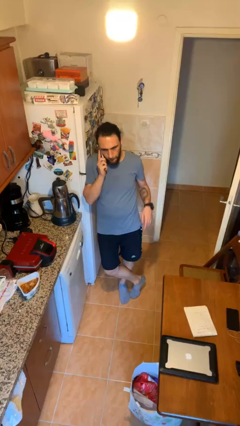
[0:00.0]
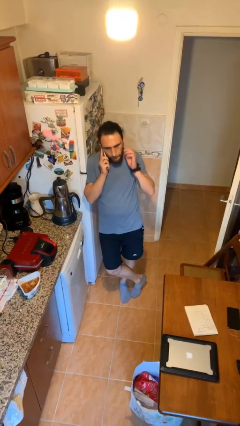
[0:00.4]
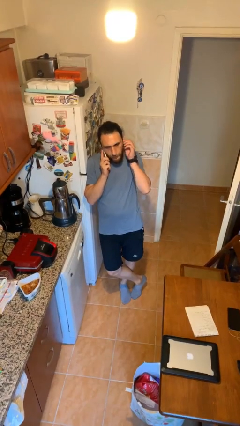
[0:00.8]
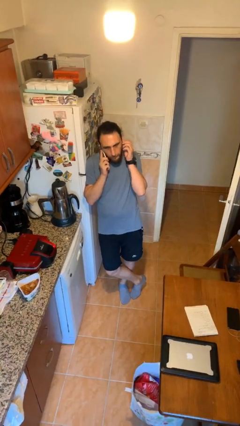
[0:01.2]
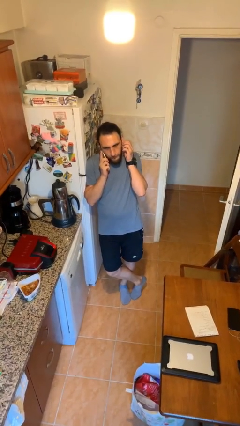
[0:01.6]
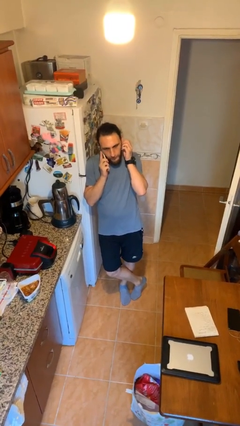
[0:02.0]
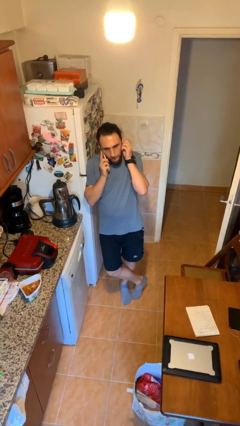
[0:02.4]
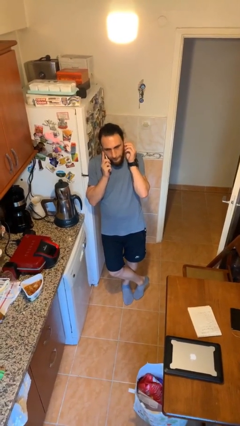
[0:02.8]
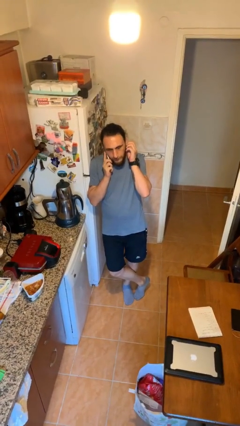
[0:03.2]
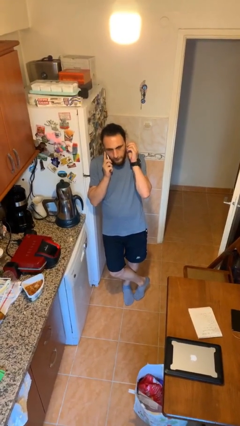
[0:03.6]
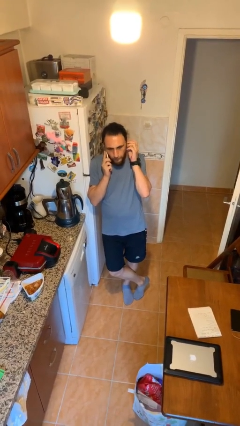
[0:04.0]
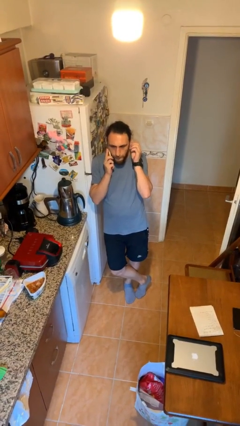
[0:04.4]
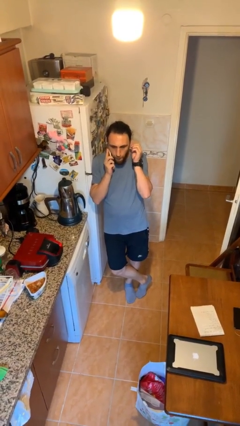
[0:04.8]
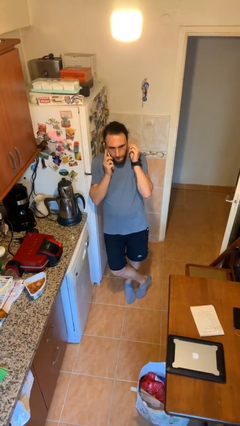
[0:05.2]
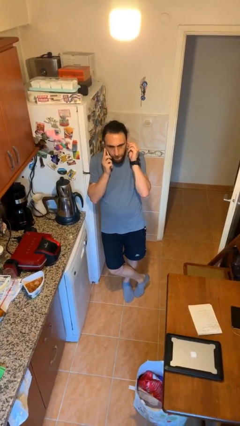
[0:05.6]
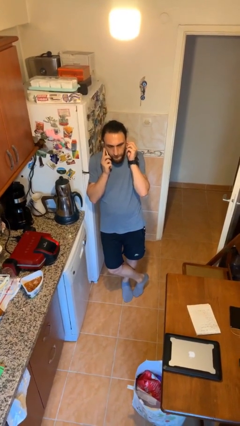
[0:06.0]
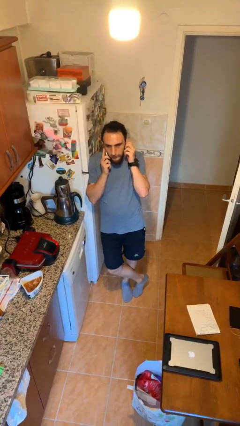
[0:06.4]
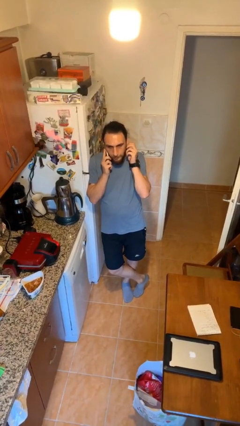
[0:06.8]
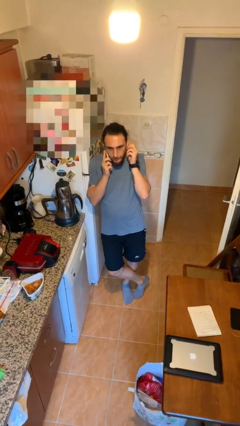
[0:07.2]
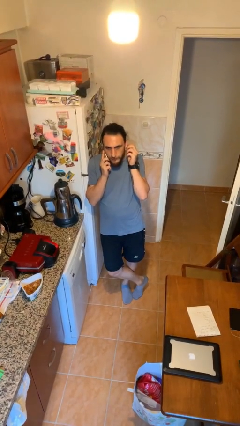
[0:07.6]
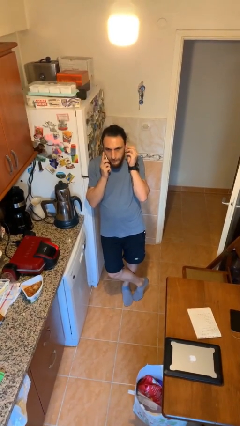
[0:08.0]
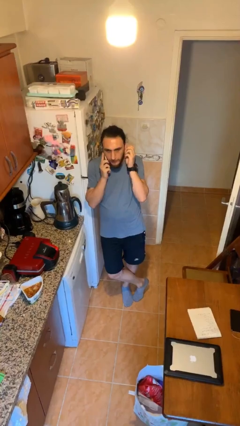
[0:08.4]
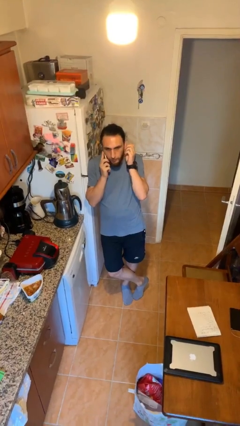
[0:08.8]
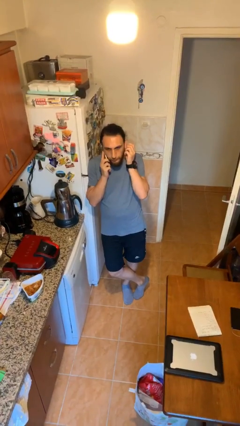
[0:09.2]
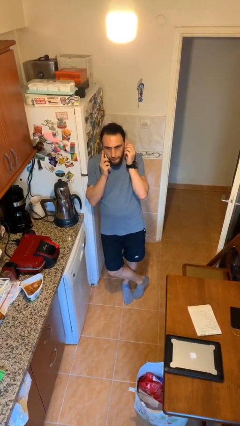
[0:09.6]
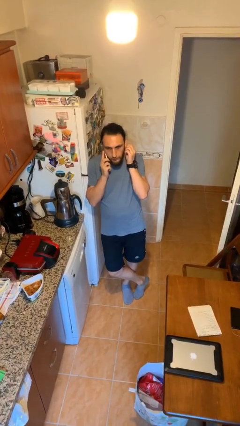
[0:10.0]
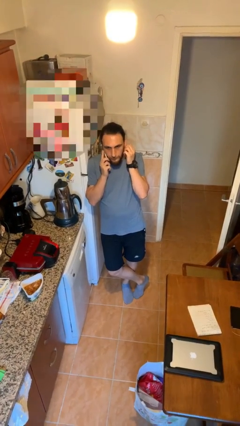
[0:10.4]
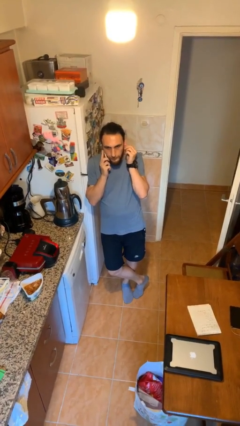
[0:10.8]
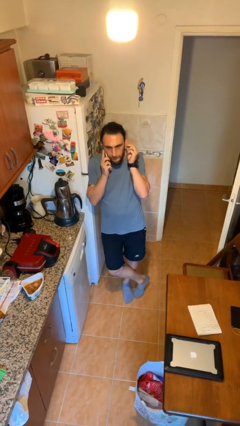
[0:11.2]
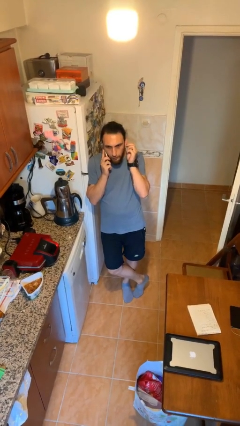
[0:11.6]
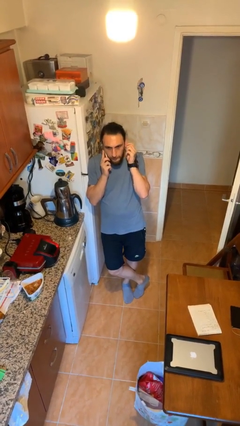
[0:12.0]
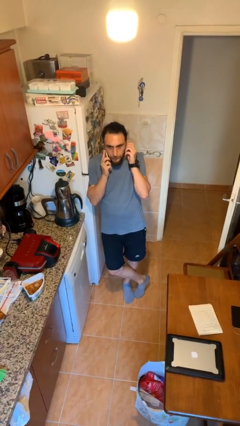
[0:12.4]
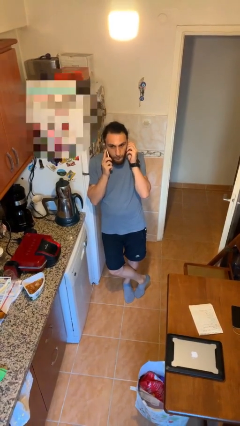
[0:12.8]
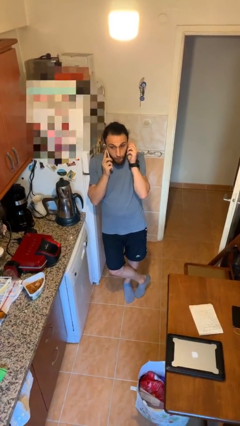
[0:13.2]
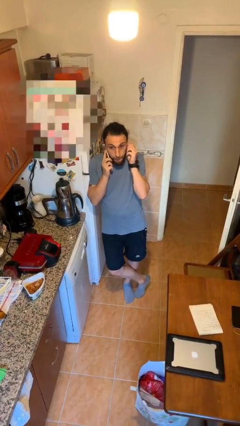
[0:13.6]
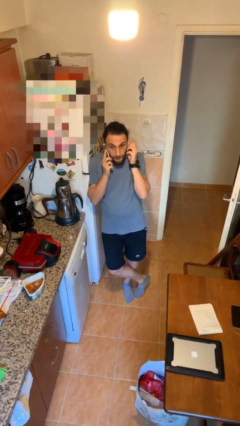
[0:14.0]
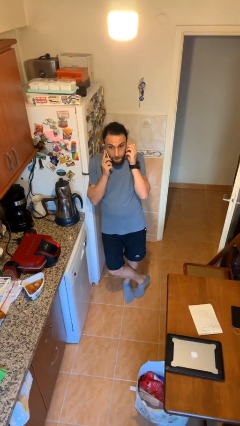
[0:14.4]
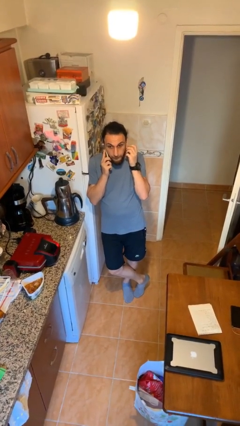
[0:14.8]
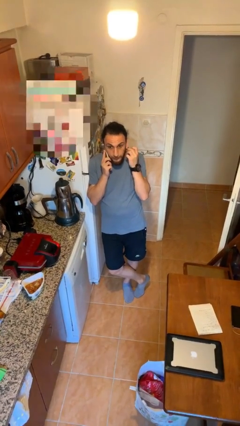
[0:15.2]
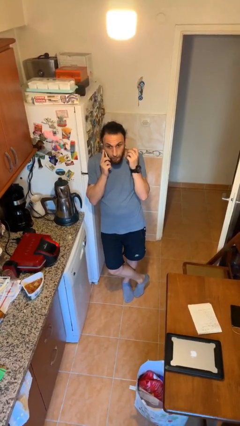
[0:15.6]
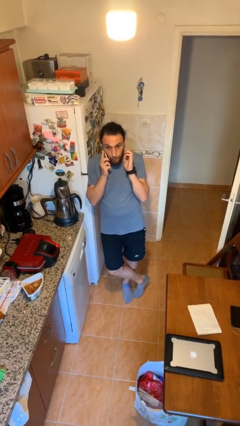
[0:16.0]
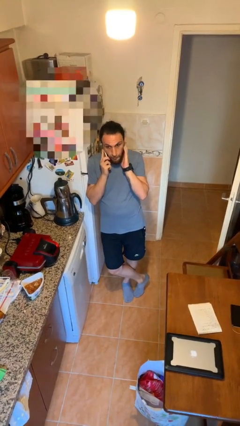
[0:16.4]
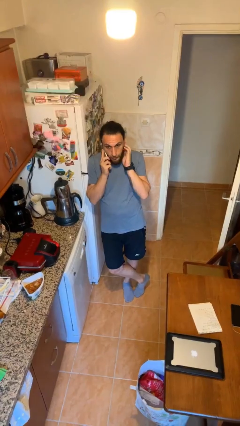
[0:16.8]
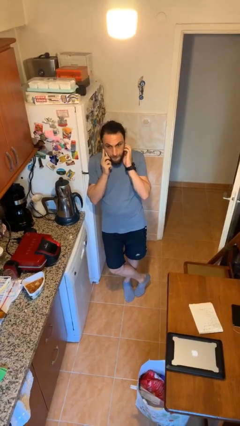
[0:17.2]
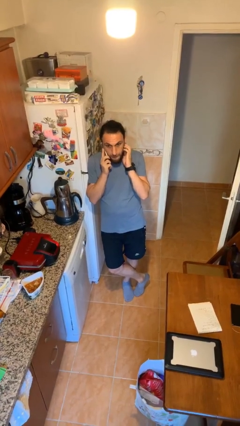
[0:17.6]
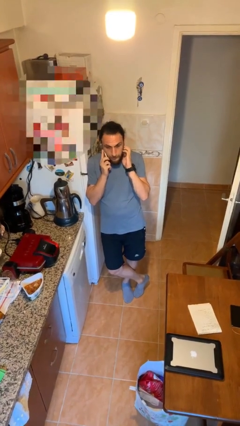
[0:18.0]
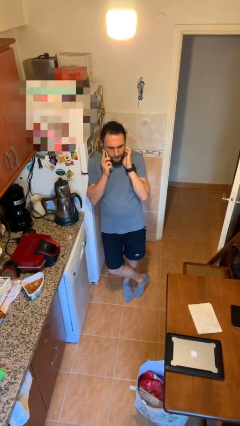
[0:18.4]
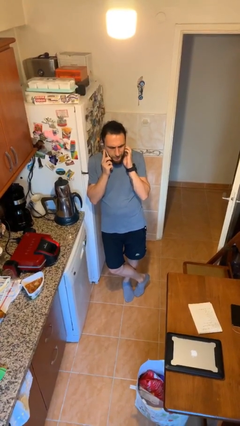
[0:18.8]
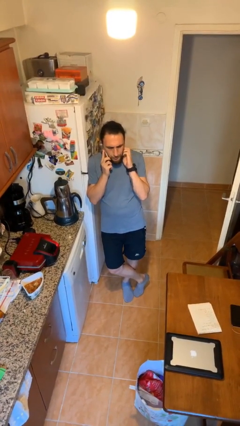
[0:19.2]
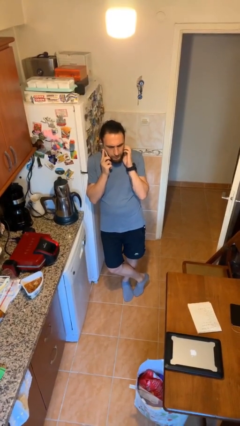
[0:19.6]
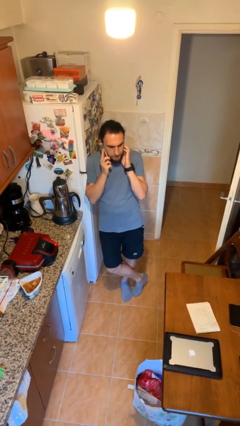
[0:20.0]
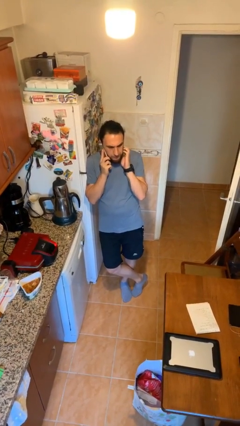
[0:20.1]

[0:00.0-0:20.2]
person talks on phone

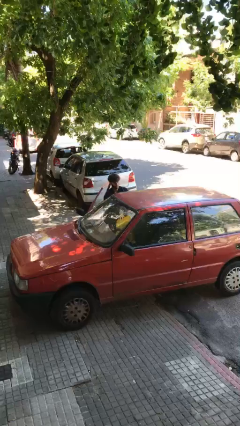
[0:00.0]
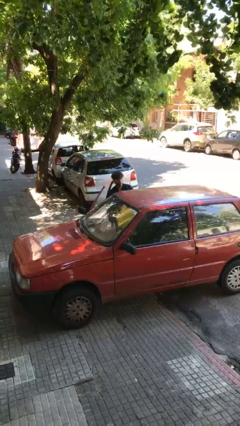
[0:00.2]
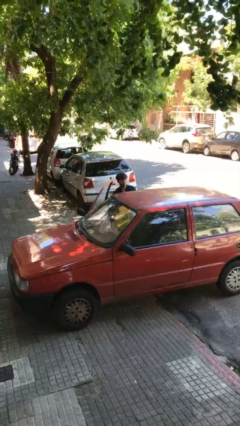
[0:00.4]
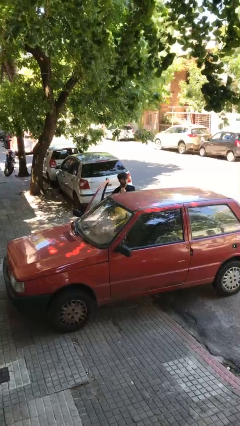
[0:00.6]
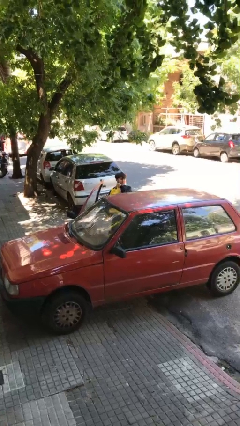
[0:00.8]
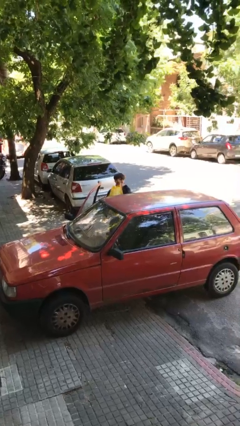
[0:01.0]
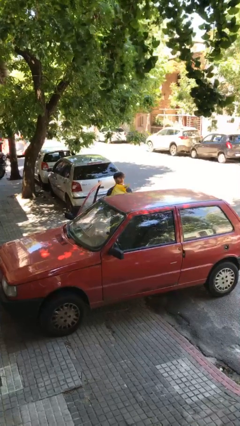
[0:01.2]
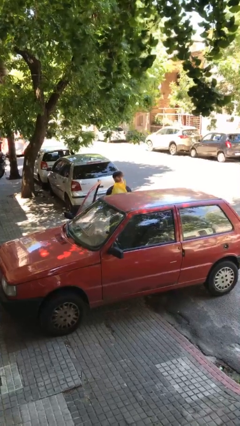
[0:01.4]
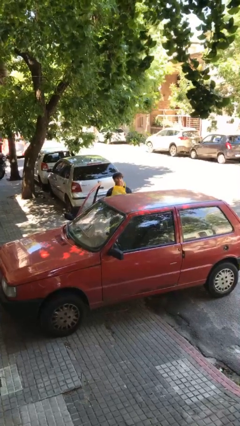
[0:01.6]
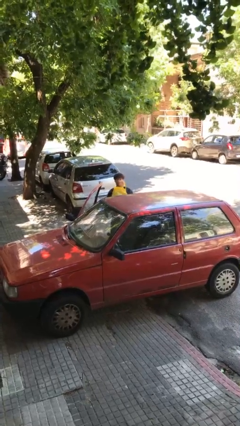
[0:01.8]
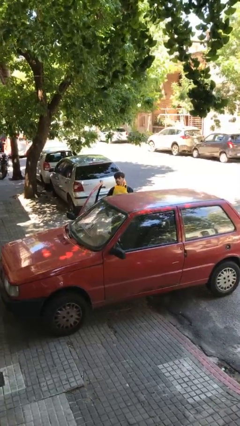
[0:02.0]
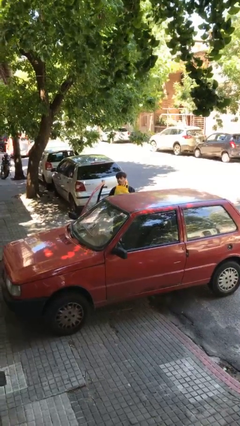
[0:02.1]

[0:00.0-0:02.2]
person unloads car

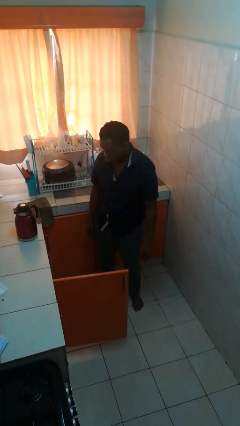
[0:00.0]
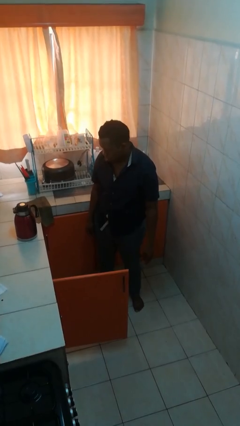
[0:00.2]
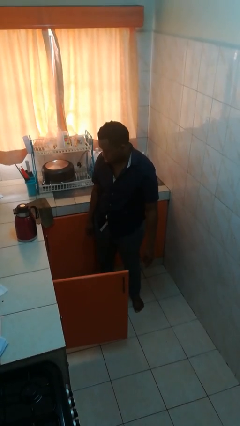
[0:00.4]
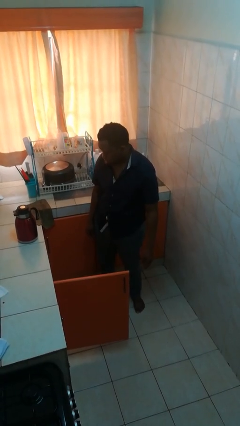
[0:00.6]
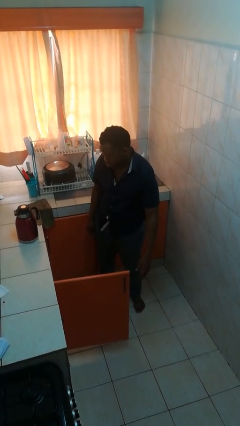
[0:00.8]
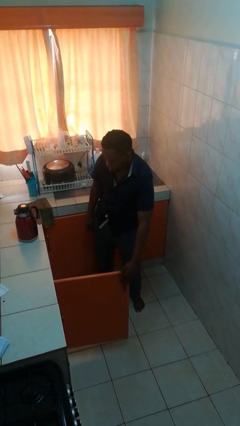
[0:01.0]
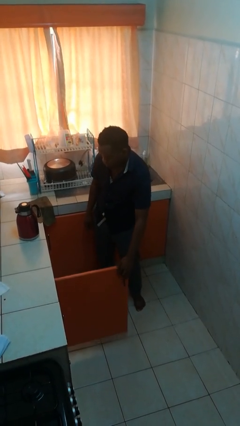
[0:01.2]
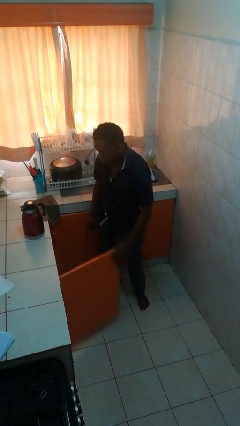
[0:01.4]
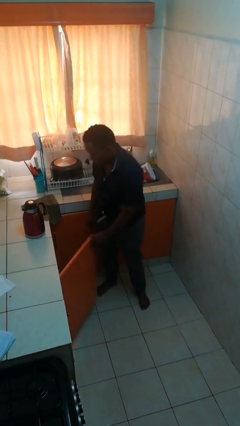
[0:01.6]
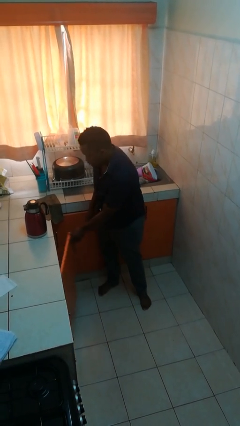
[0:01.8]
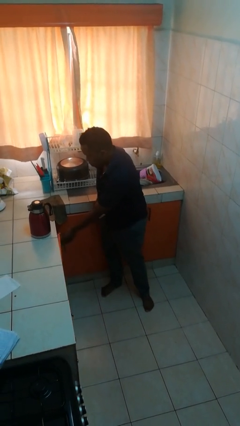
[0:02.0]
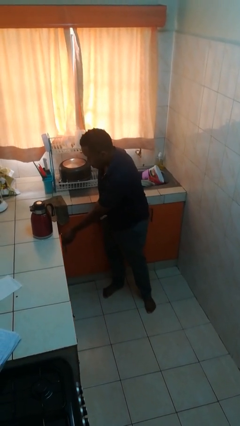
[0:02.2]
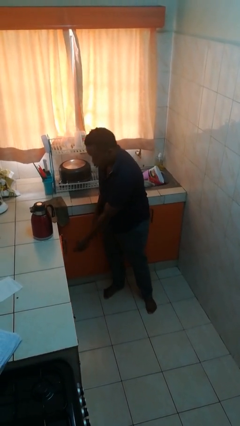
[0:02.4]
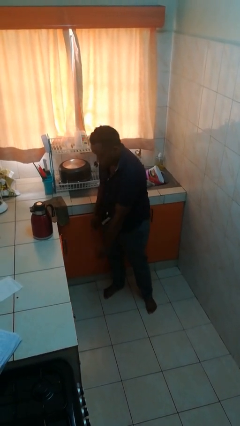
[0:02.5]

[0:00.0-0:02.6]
person closes cabinet

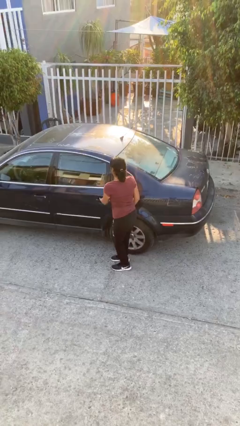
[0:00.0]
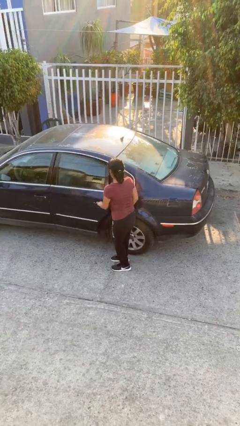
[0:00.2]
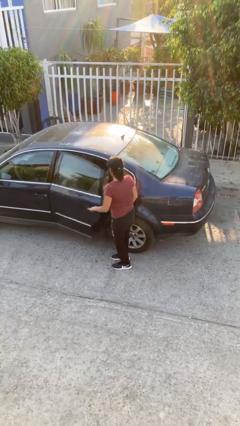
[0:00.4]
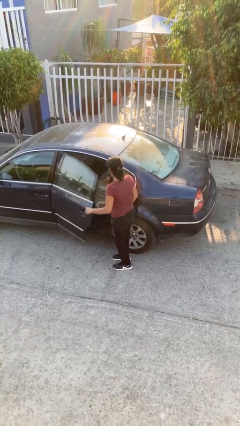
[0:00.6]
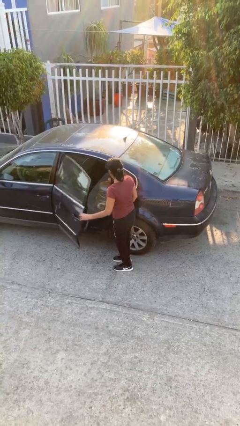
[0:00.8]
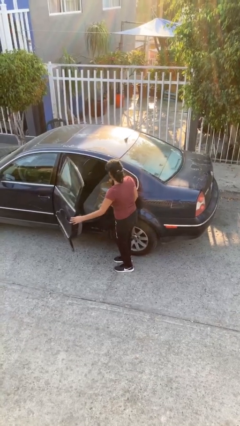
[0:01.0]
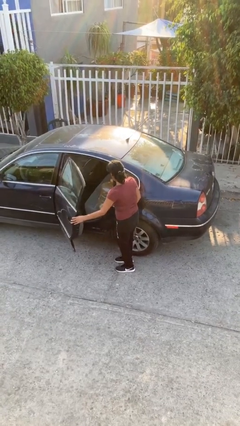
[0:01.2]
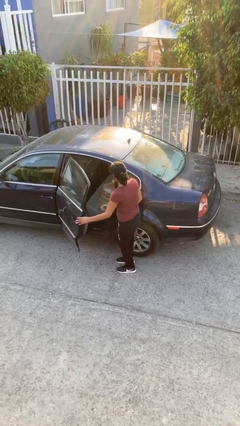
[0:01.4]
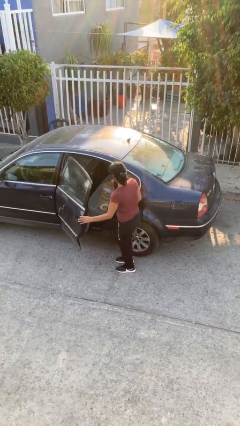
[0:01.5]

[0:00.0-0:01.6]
person opens car door

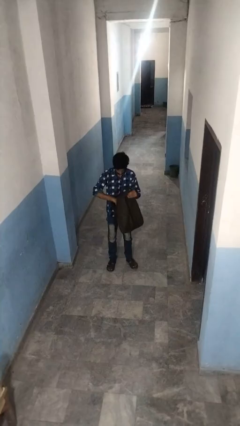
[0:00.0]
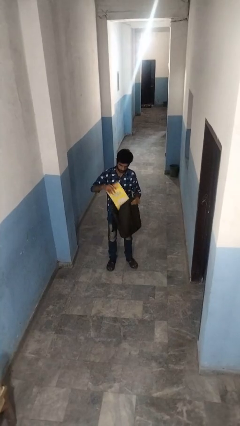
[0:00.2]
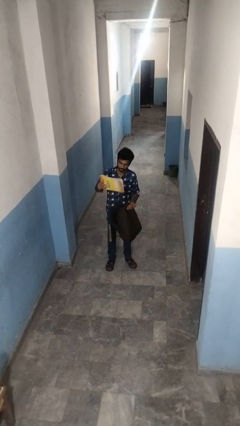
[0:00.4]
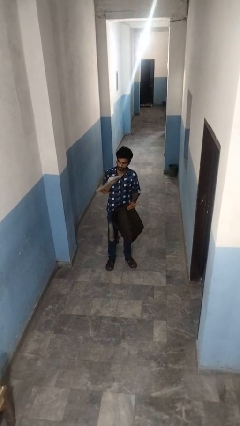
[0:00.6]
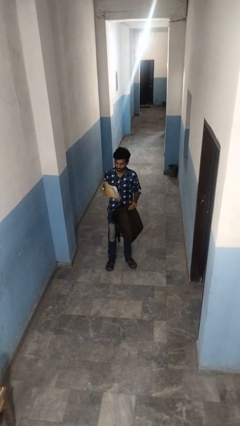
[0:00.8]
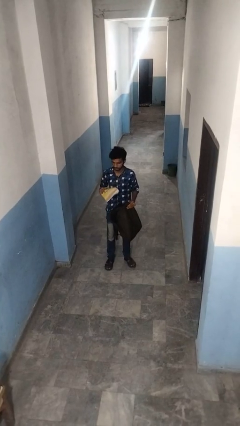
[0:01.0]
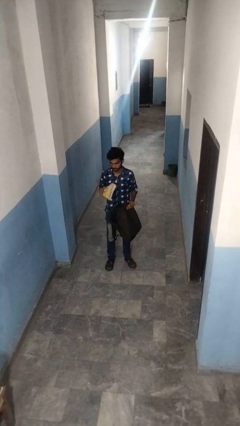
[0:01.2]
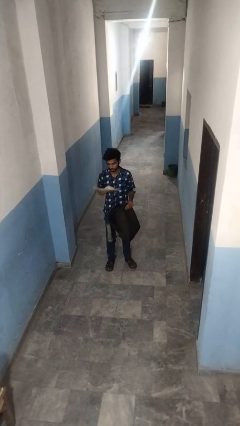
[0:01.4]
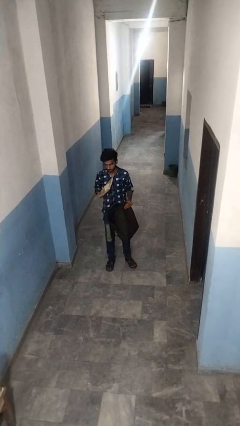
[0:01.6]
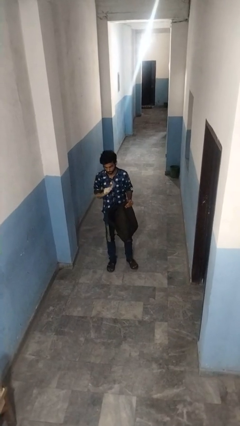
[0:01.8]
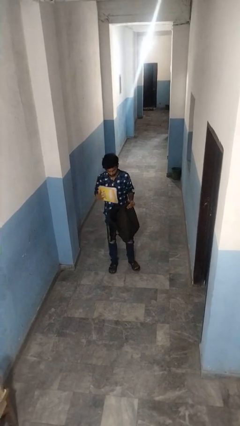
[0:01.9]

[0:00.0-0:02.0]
person takes object from backpack
